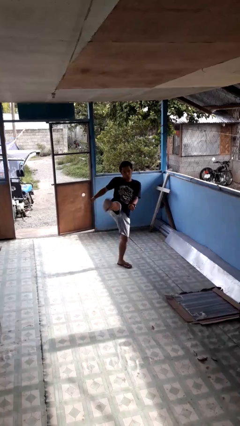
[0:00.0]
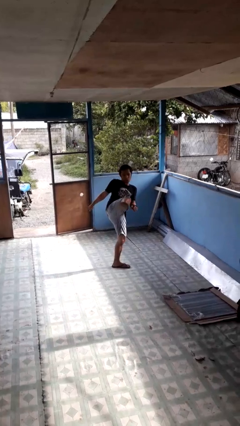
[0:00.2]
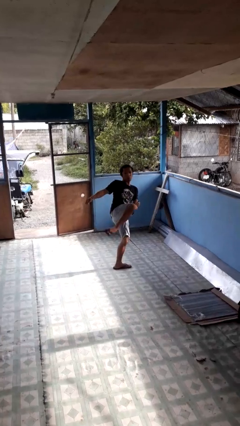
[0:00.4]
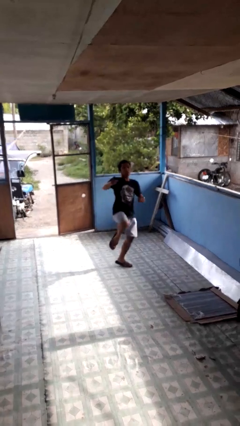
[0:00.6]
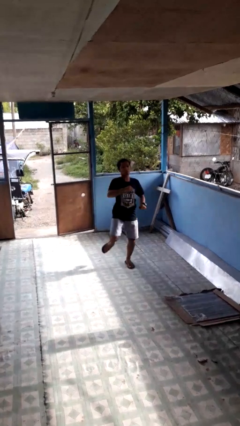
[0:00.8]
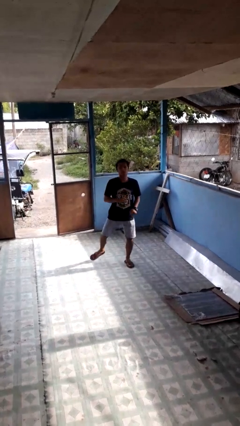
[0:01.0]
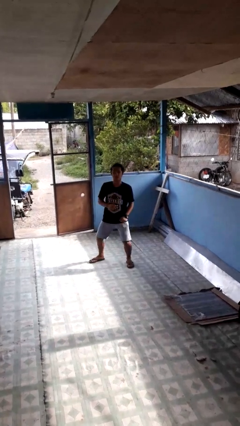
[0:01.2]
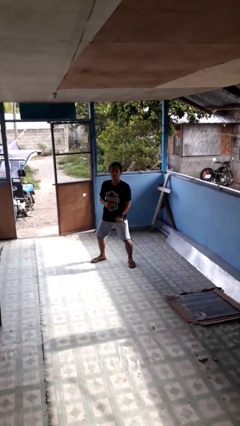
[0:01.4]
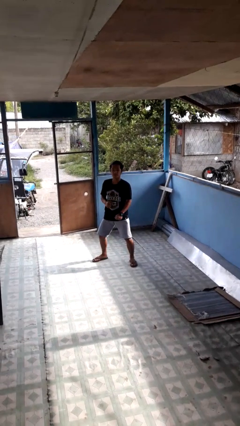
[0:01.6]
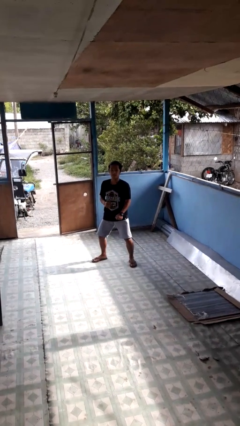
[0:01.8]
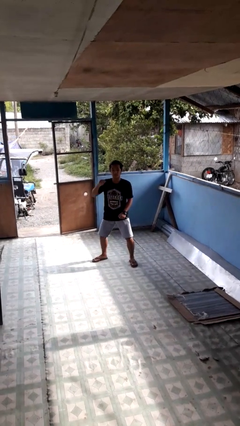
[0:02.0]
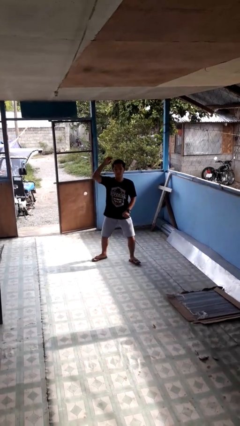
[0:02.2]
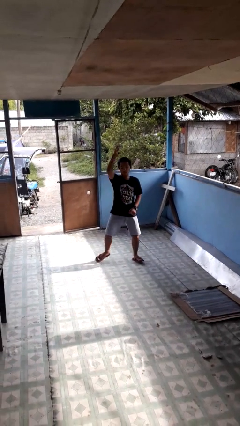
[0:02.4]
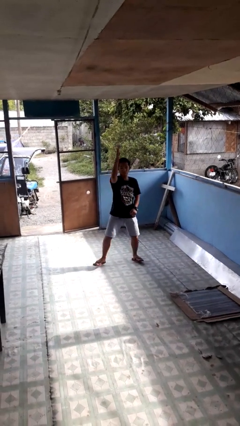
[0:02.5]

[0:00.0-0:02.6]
person karate kicks

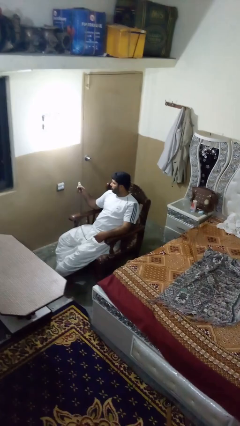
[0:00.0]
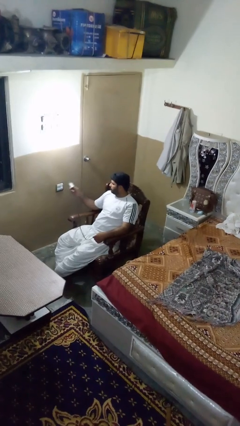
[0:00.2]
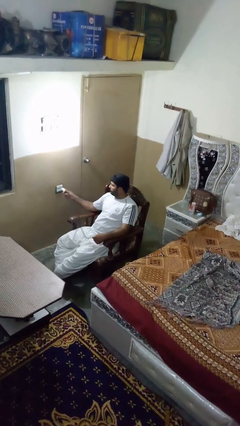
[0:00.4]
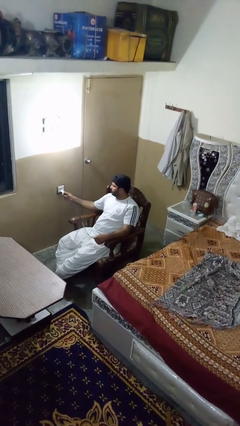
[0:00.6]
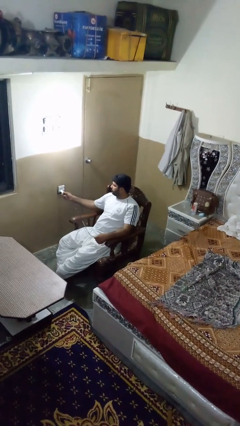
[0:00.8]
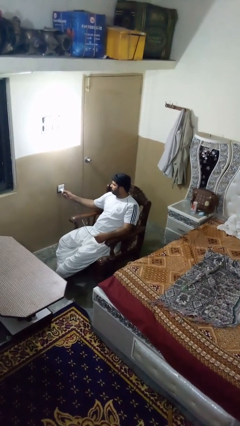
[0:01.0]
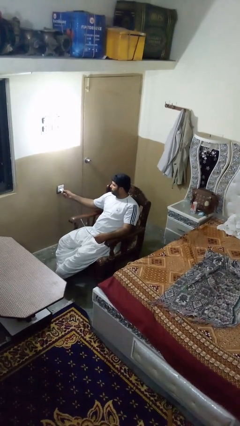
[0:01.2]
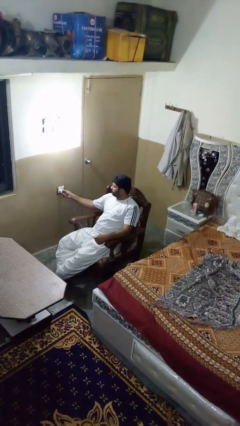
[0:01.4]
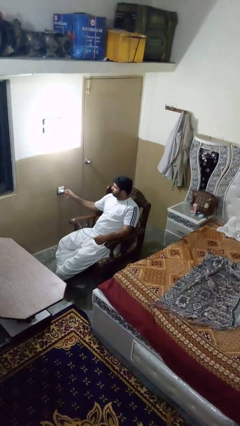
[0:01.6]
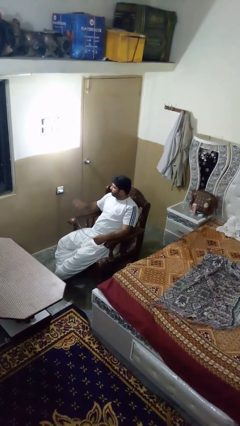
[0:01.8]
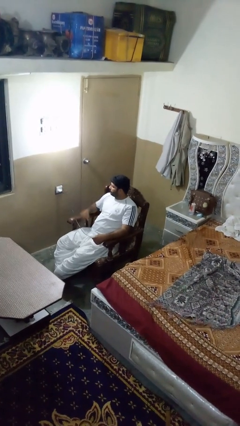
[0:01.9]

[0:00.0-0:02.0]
person plugs into electrical socket

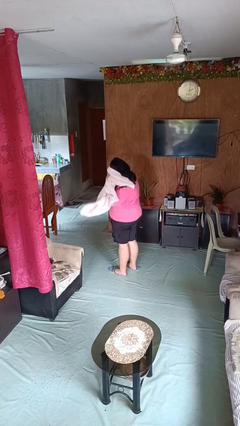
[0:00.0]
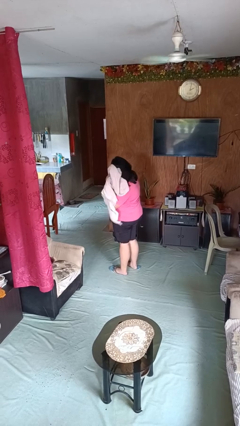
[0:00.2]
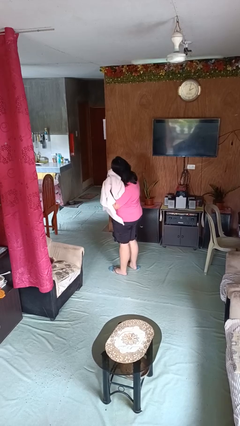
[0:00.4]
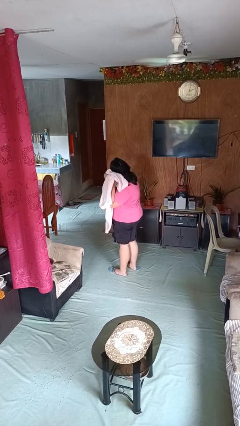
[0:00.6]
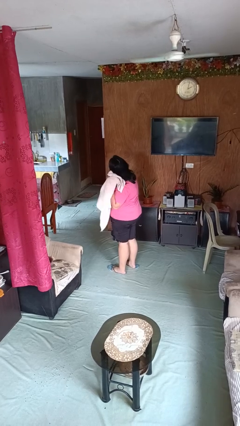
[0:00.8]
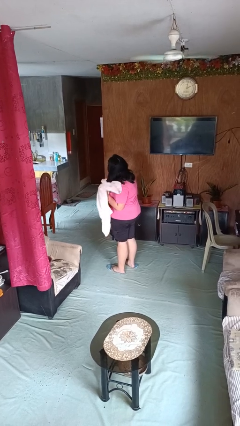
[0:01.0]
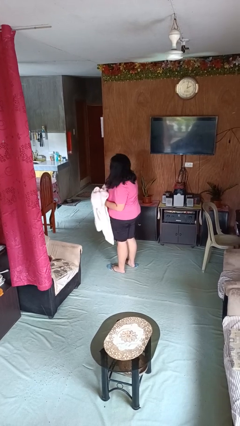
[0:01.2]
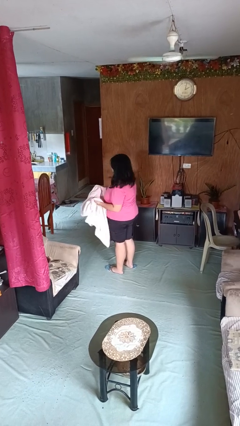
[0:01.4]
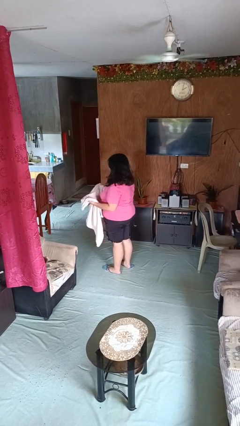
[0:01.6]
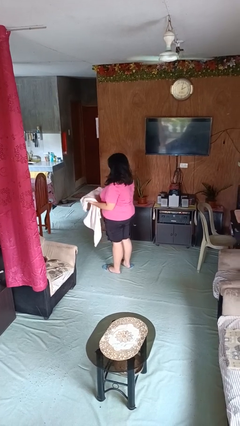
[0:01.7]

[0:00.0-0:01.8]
person dries hair with towel

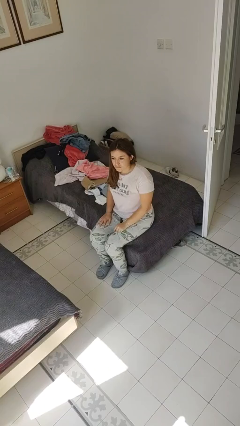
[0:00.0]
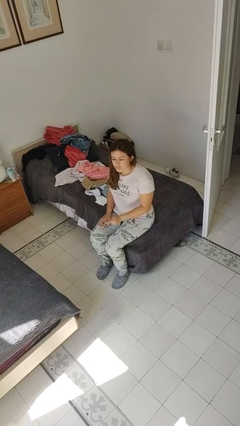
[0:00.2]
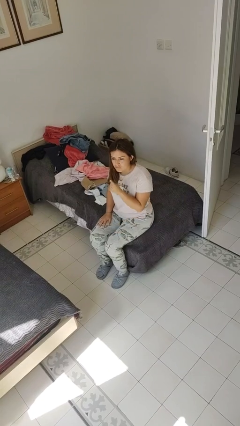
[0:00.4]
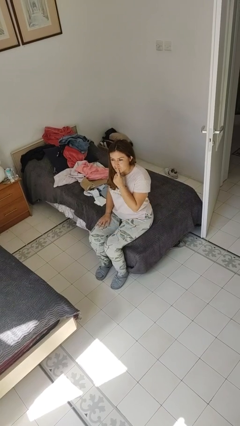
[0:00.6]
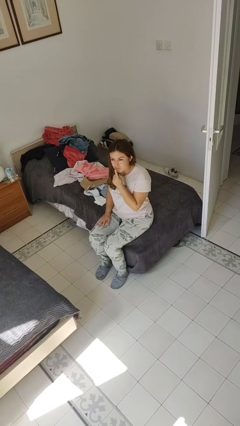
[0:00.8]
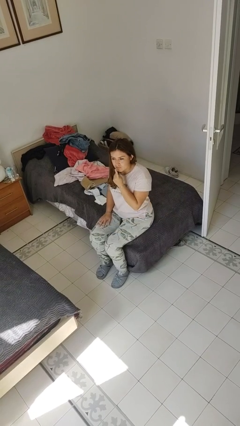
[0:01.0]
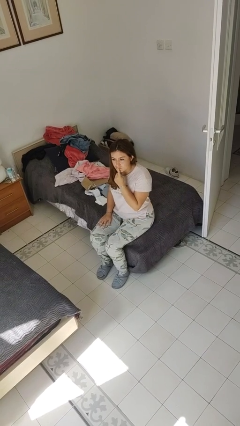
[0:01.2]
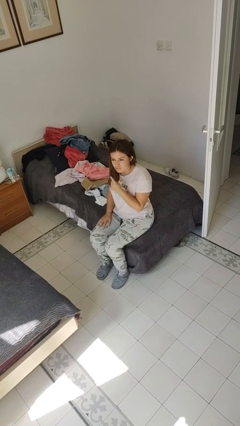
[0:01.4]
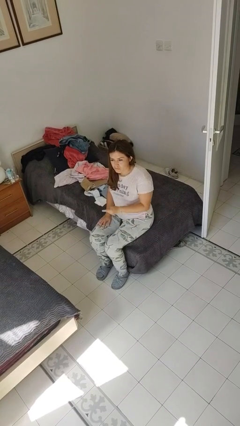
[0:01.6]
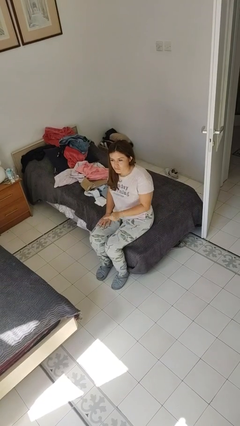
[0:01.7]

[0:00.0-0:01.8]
person gestures be quiet

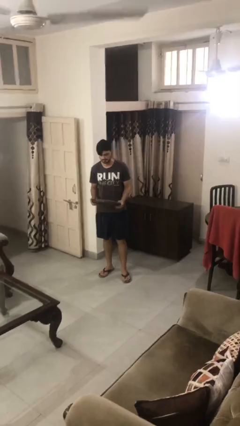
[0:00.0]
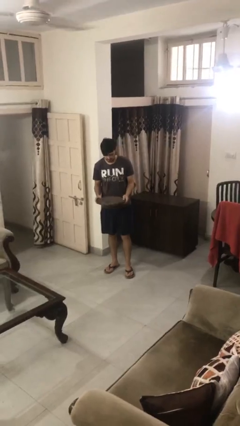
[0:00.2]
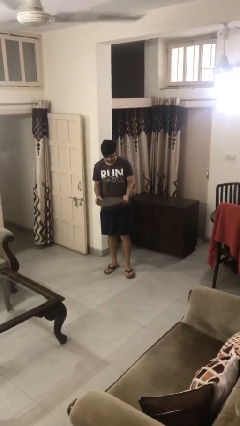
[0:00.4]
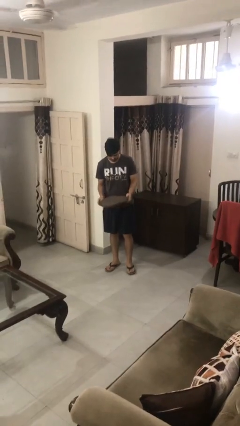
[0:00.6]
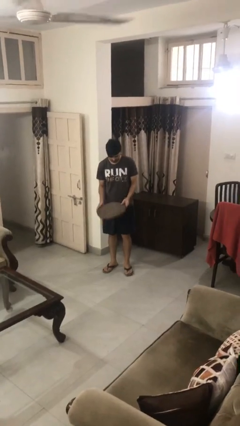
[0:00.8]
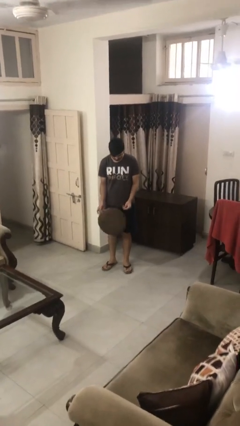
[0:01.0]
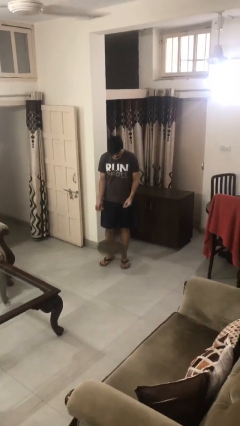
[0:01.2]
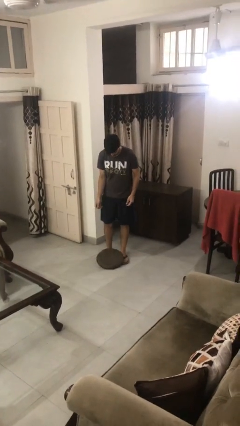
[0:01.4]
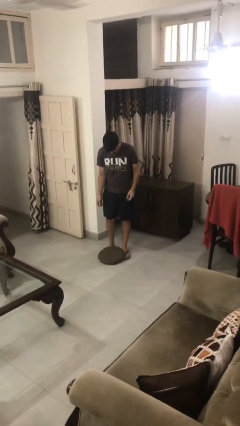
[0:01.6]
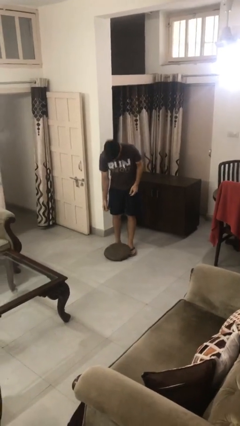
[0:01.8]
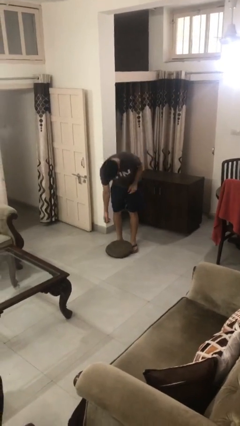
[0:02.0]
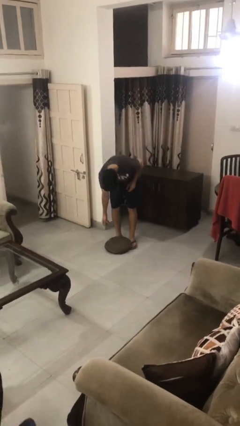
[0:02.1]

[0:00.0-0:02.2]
person drops object

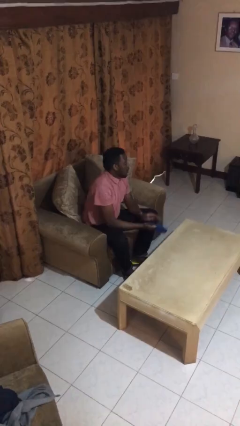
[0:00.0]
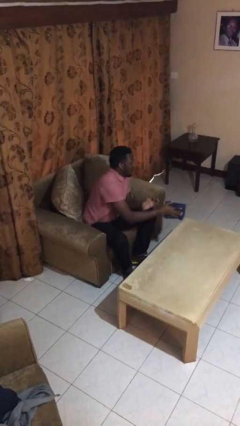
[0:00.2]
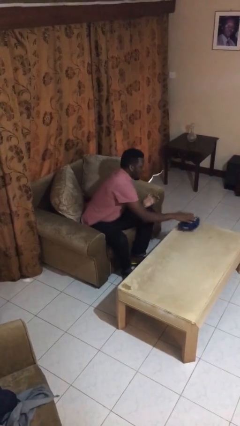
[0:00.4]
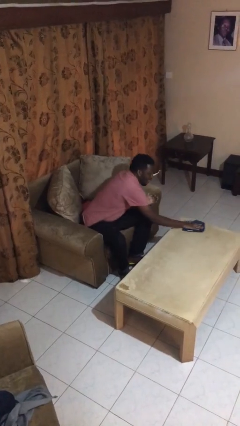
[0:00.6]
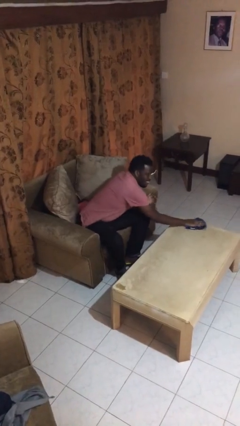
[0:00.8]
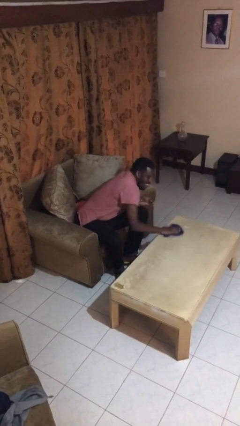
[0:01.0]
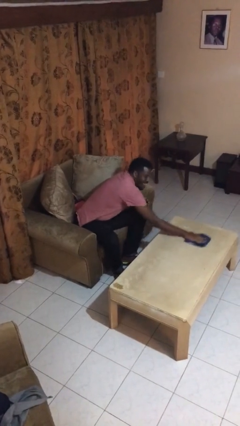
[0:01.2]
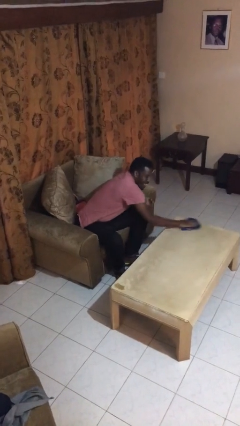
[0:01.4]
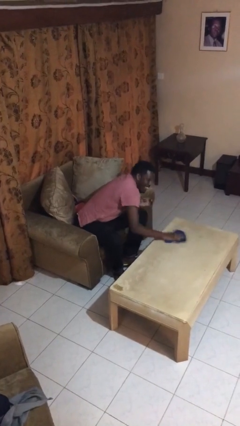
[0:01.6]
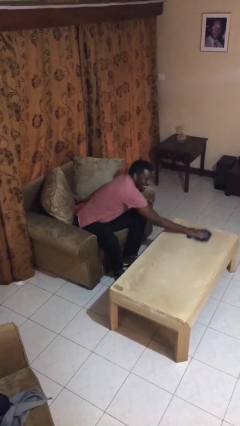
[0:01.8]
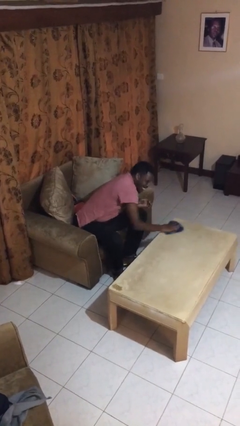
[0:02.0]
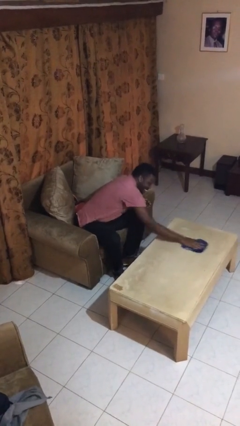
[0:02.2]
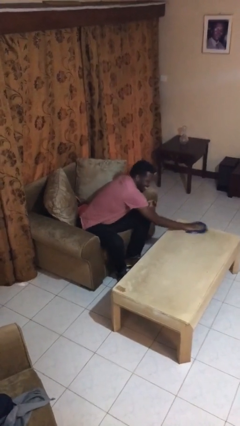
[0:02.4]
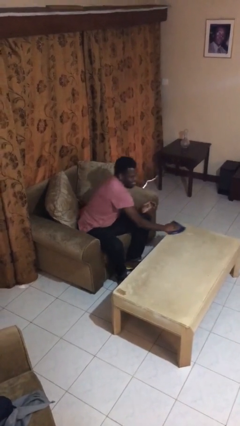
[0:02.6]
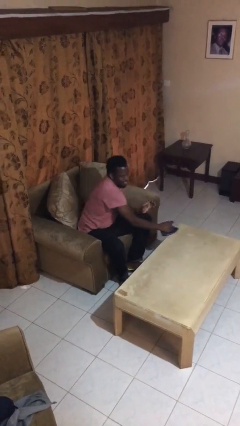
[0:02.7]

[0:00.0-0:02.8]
person cleans table with rag

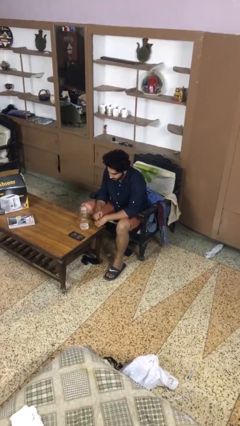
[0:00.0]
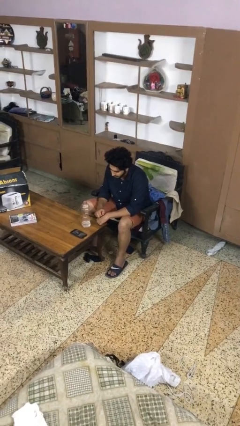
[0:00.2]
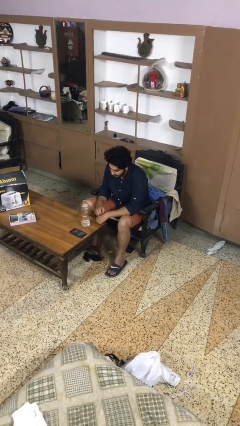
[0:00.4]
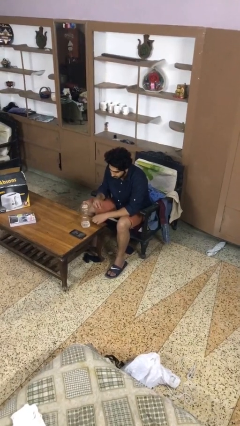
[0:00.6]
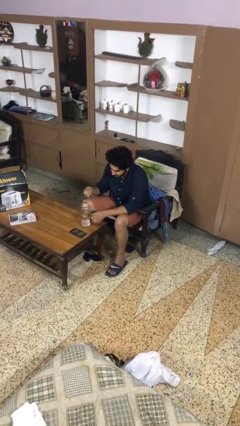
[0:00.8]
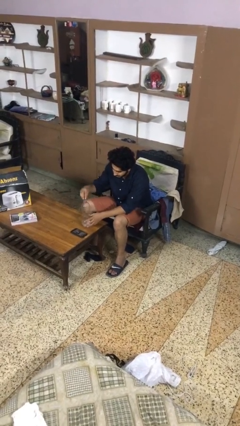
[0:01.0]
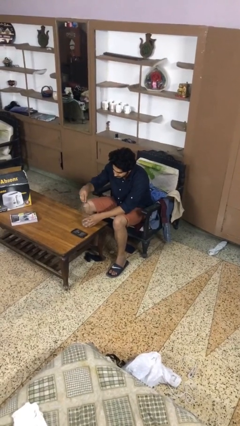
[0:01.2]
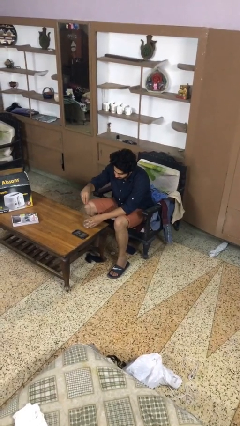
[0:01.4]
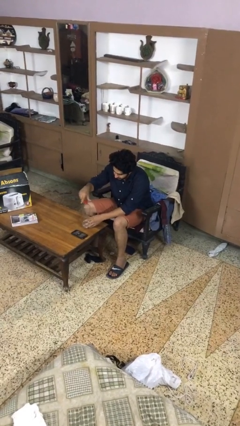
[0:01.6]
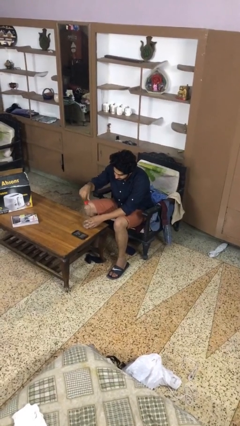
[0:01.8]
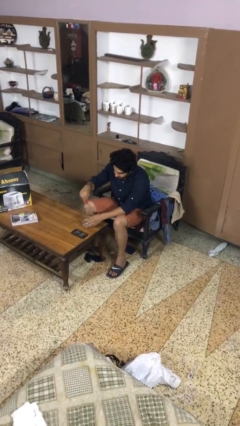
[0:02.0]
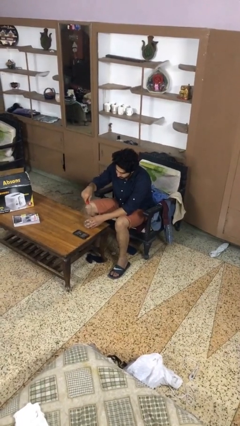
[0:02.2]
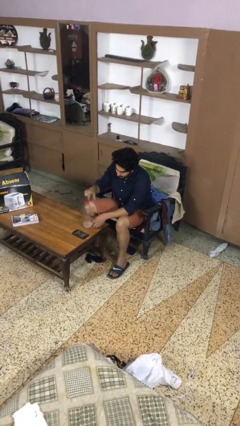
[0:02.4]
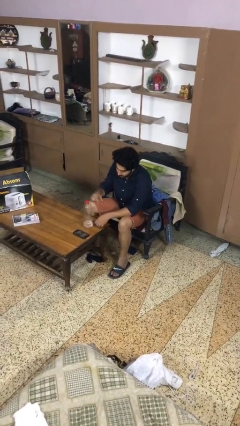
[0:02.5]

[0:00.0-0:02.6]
person screws lid to bottle

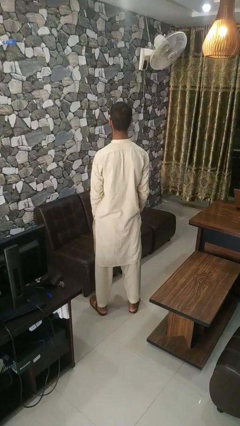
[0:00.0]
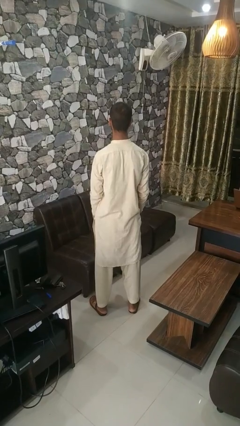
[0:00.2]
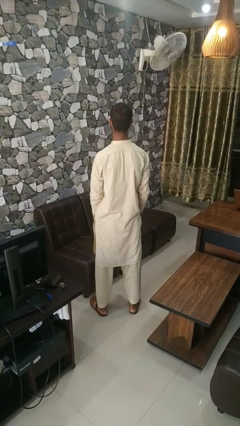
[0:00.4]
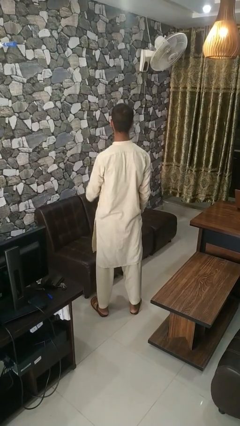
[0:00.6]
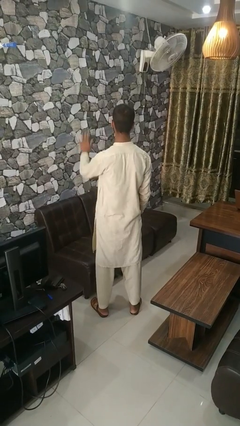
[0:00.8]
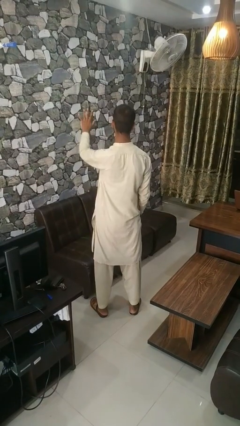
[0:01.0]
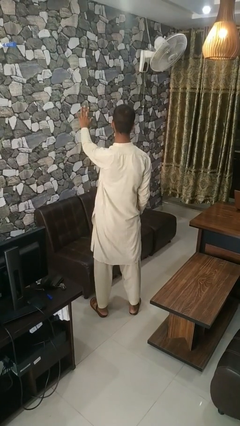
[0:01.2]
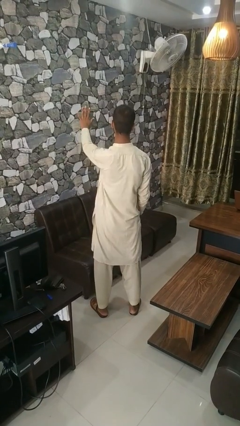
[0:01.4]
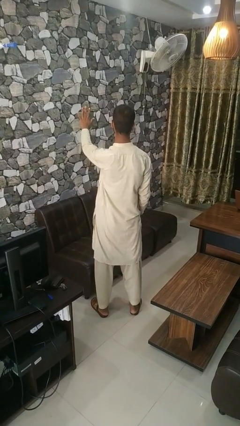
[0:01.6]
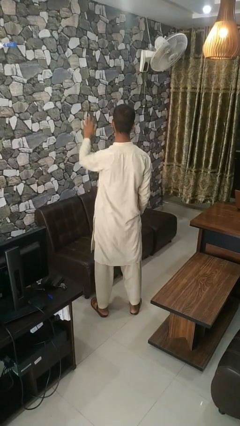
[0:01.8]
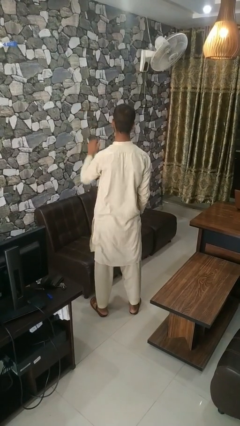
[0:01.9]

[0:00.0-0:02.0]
person gestures number five
